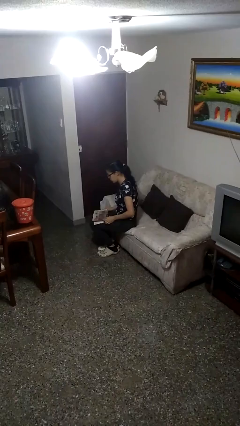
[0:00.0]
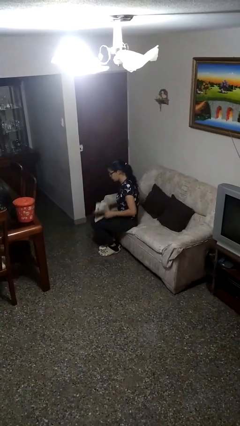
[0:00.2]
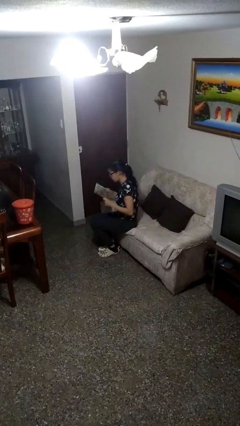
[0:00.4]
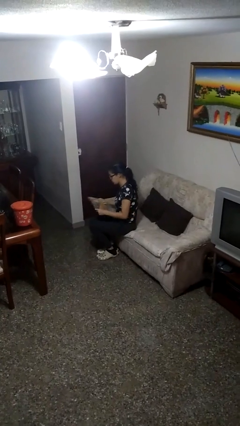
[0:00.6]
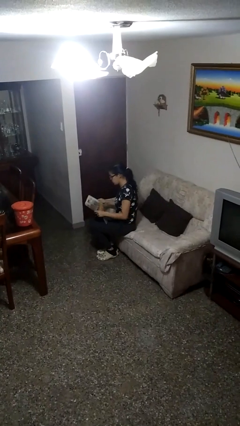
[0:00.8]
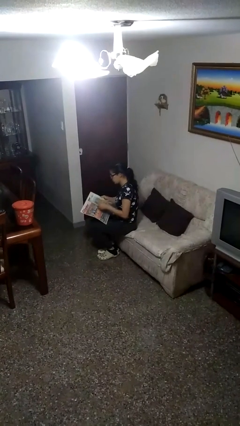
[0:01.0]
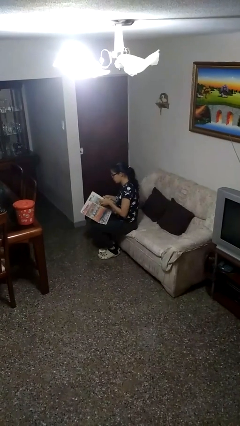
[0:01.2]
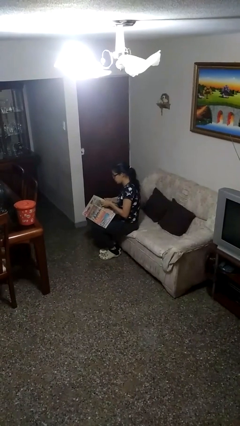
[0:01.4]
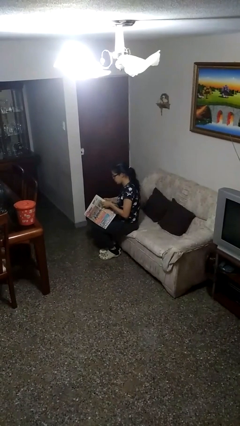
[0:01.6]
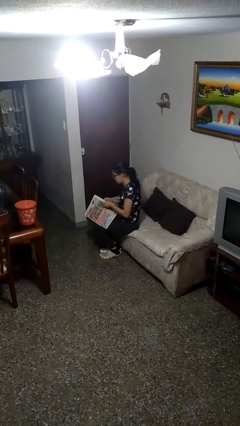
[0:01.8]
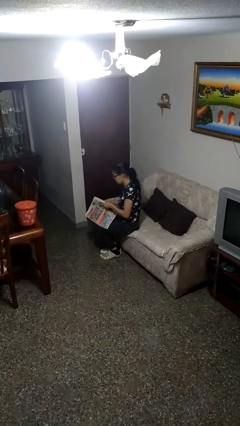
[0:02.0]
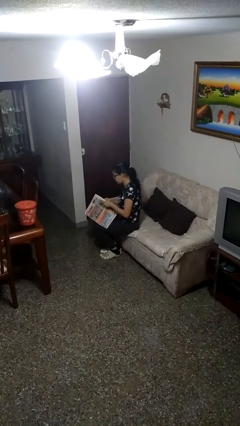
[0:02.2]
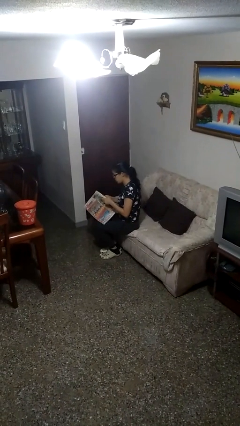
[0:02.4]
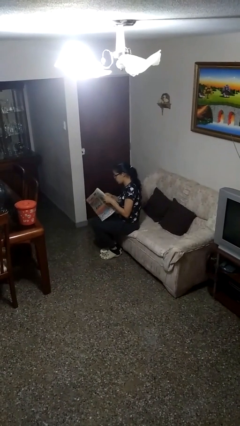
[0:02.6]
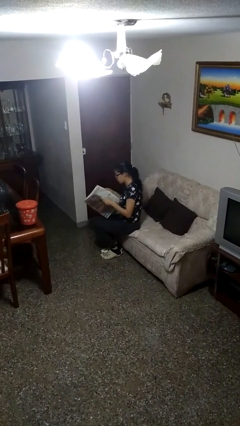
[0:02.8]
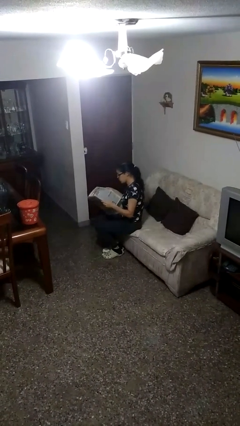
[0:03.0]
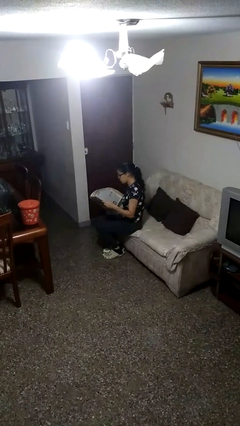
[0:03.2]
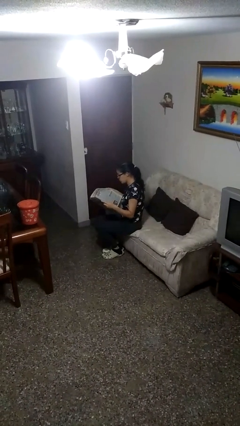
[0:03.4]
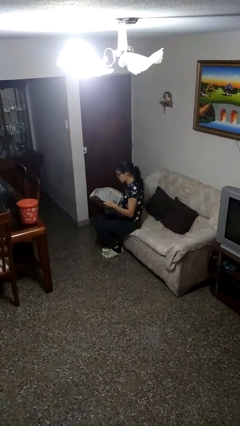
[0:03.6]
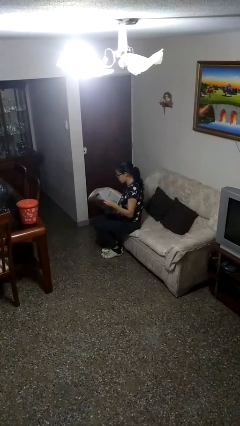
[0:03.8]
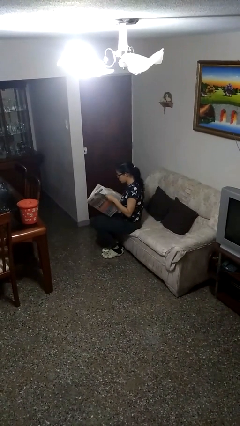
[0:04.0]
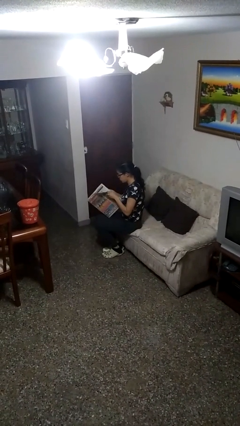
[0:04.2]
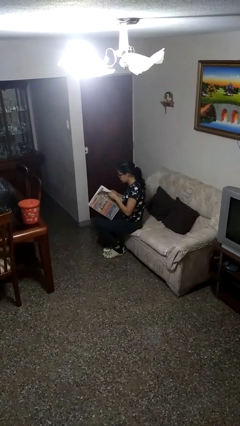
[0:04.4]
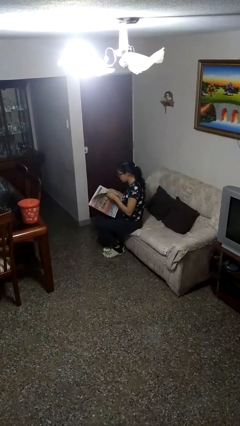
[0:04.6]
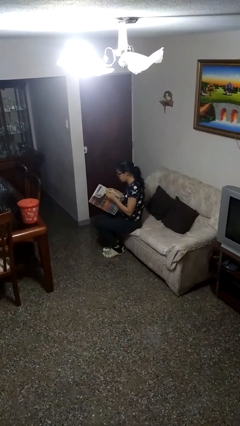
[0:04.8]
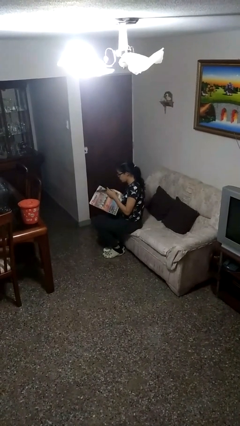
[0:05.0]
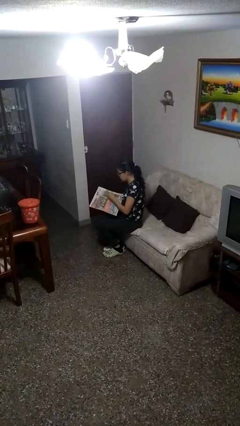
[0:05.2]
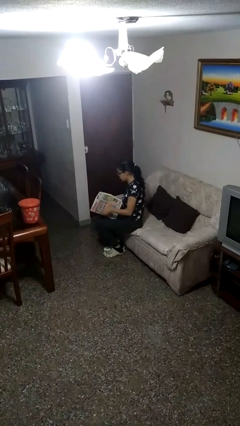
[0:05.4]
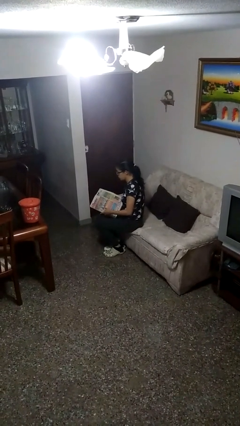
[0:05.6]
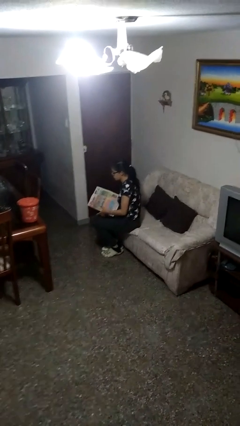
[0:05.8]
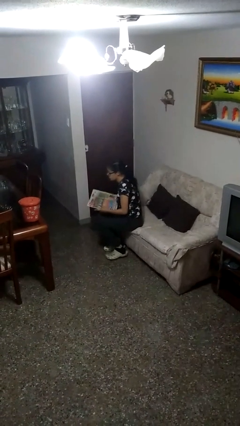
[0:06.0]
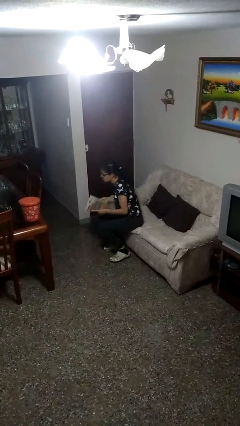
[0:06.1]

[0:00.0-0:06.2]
person reads newspaper

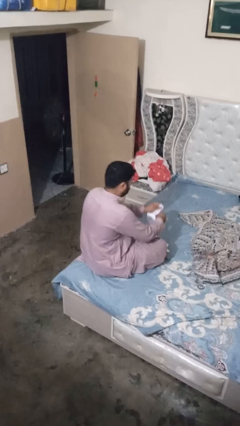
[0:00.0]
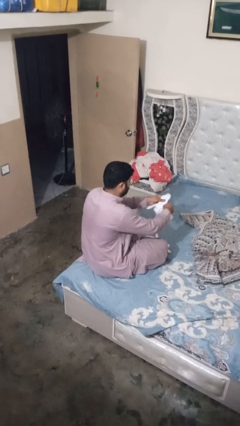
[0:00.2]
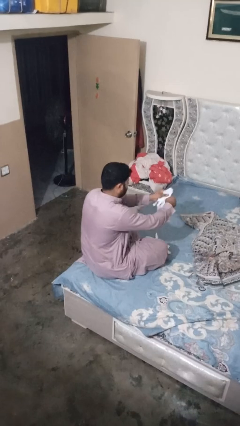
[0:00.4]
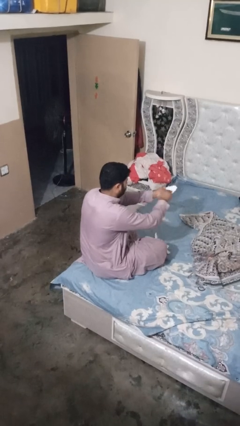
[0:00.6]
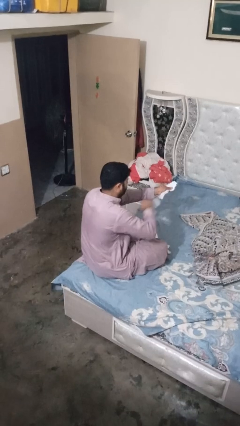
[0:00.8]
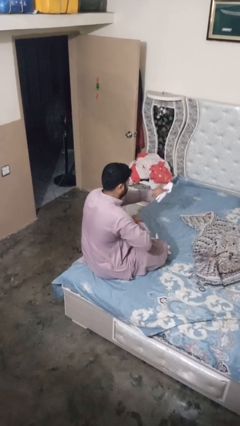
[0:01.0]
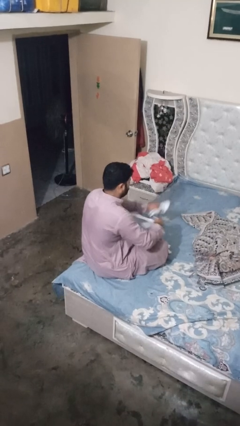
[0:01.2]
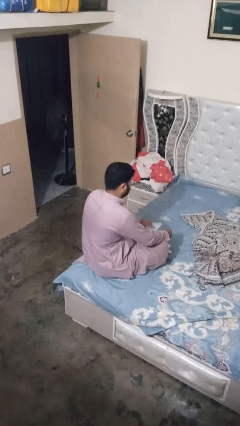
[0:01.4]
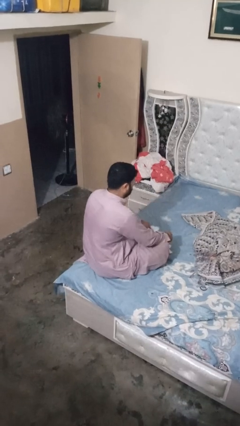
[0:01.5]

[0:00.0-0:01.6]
person tears paper

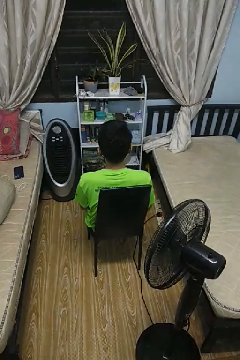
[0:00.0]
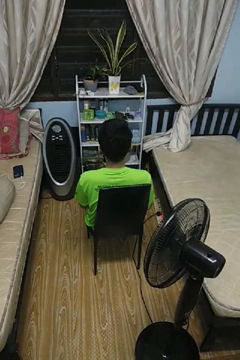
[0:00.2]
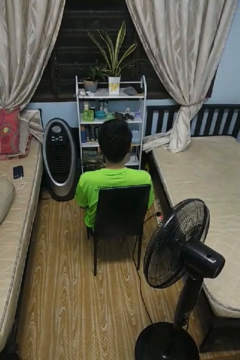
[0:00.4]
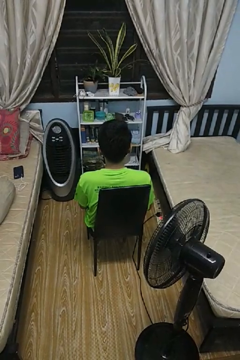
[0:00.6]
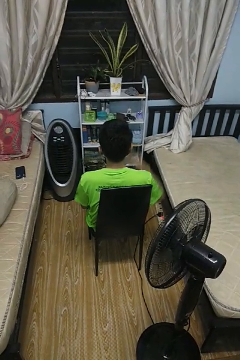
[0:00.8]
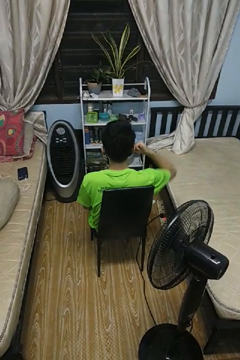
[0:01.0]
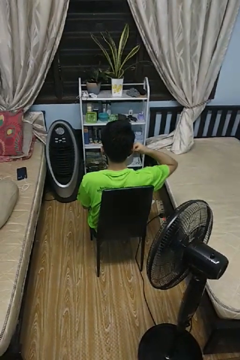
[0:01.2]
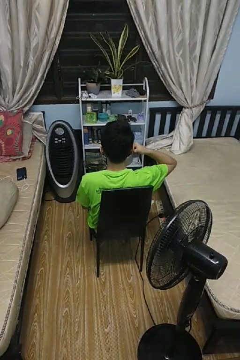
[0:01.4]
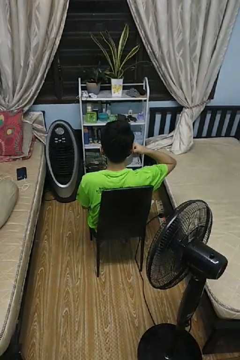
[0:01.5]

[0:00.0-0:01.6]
person gestures call me

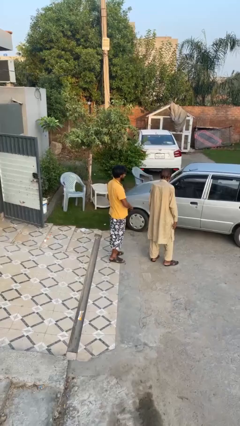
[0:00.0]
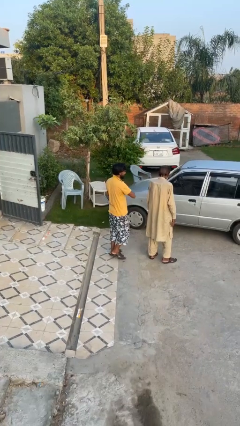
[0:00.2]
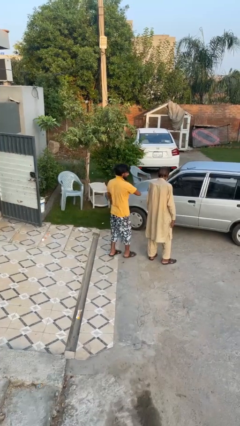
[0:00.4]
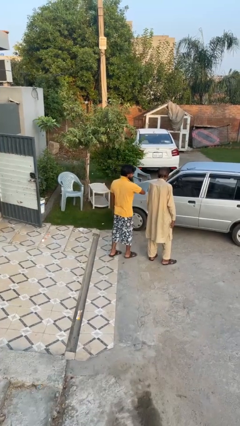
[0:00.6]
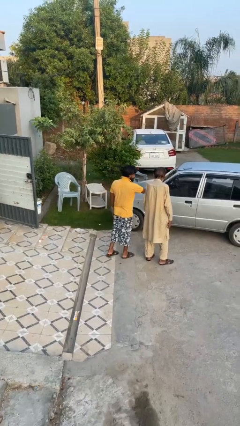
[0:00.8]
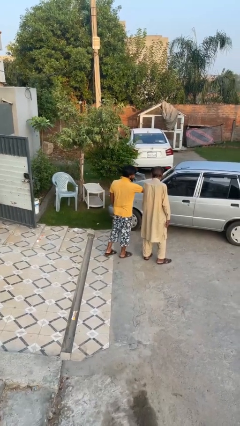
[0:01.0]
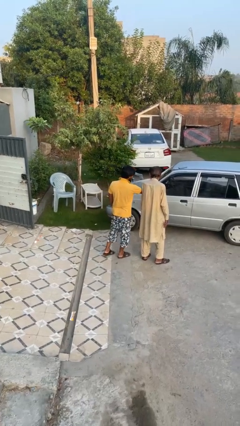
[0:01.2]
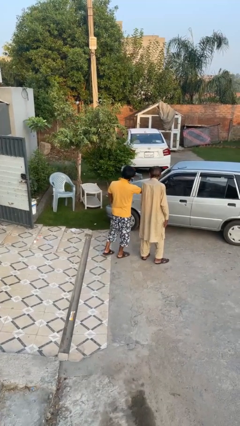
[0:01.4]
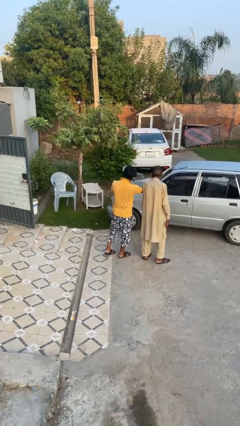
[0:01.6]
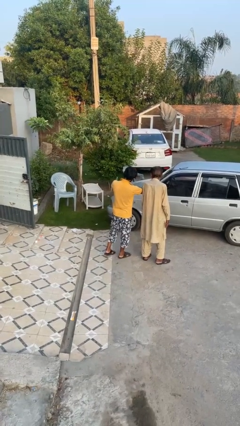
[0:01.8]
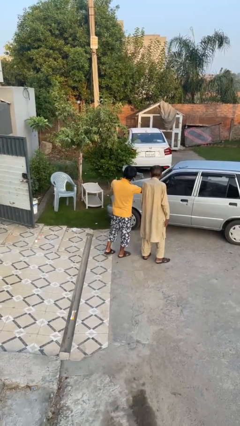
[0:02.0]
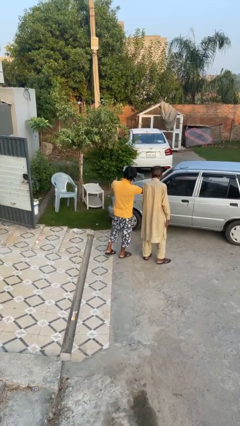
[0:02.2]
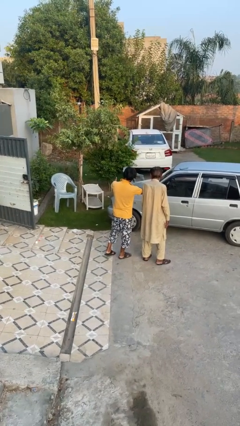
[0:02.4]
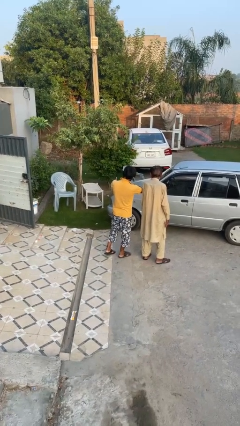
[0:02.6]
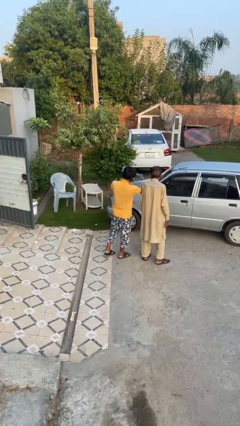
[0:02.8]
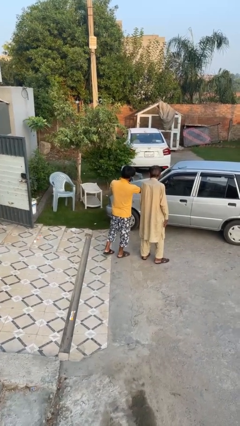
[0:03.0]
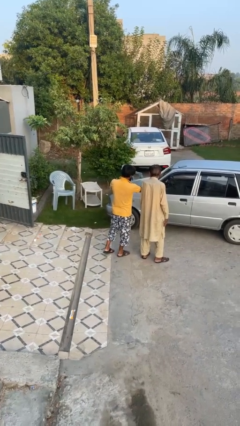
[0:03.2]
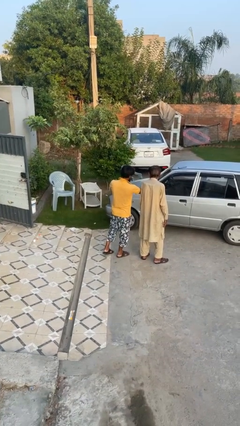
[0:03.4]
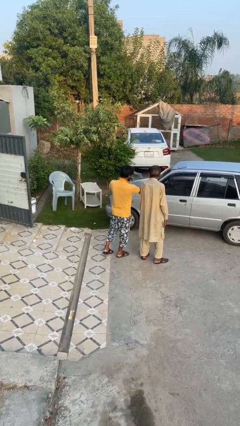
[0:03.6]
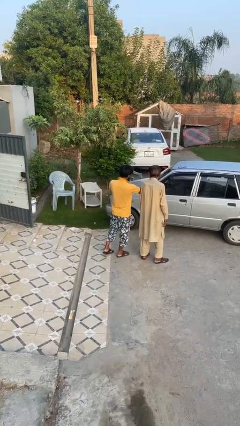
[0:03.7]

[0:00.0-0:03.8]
person nudges person with elbow

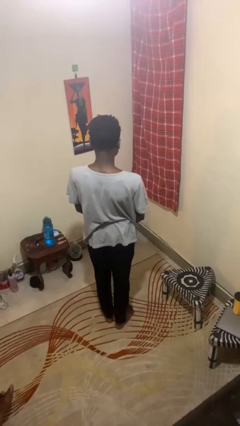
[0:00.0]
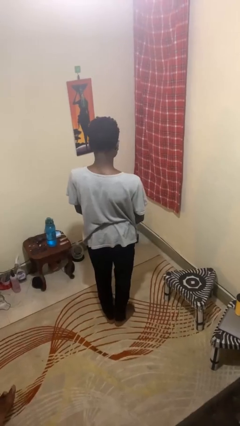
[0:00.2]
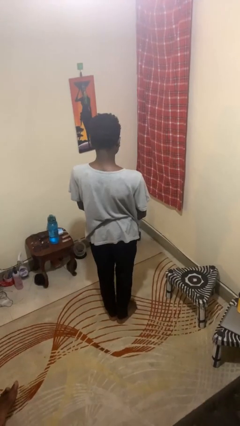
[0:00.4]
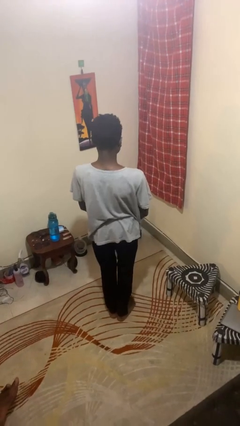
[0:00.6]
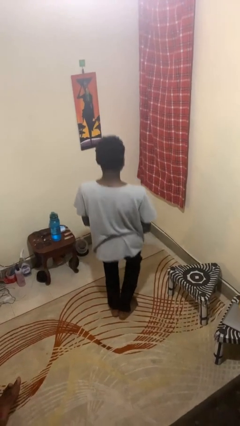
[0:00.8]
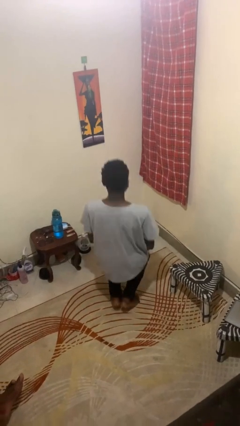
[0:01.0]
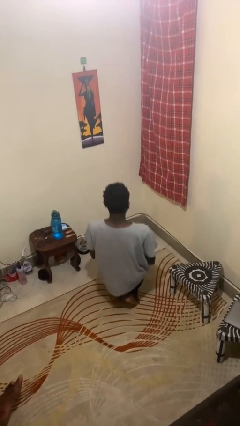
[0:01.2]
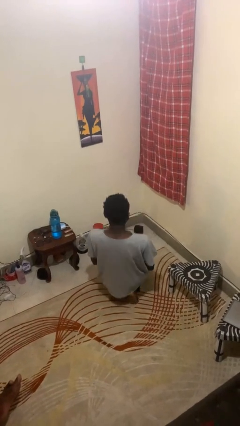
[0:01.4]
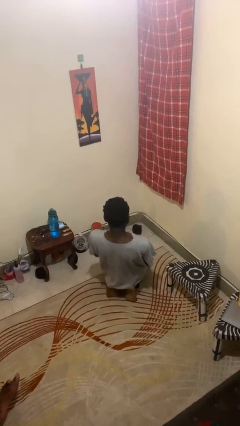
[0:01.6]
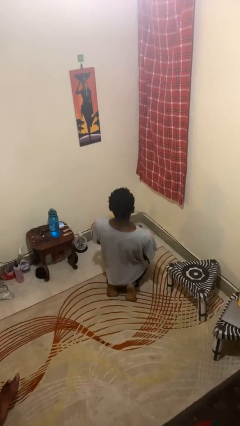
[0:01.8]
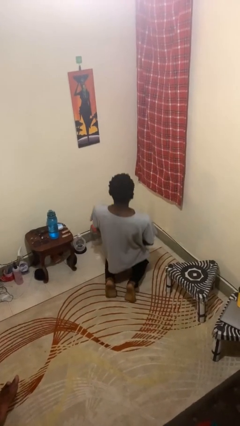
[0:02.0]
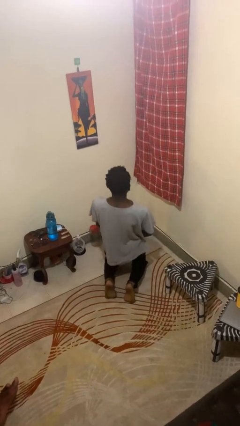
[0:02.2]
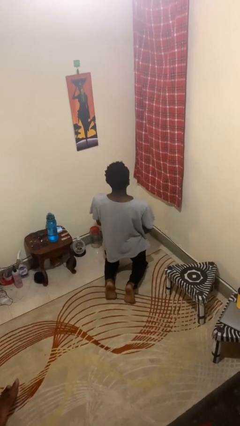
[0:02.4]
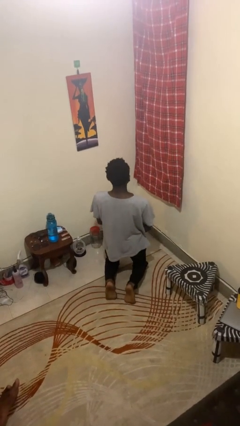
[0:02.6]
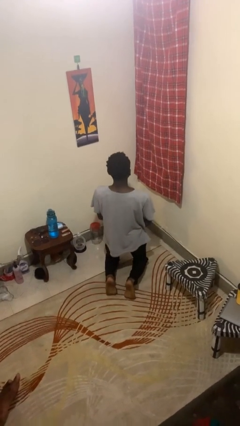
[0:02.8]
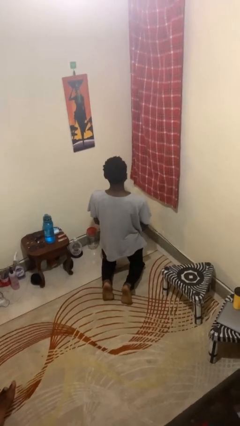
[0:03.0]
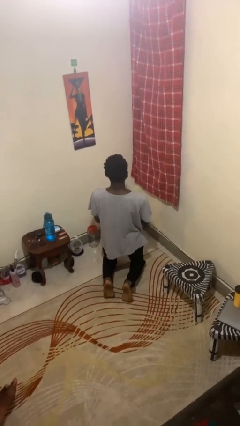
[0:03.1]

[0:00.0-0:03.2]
person kneels

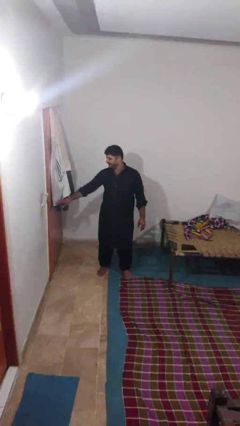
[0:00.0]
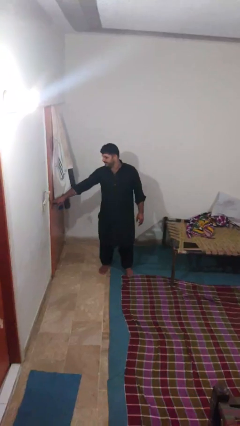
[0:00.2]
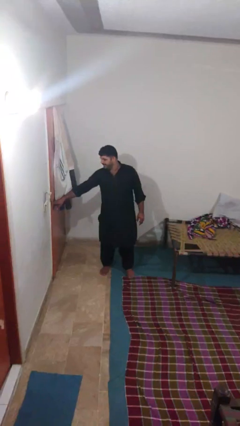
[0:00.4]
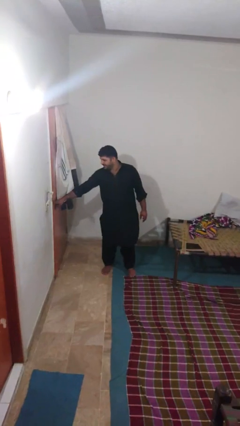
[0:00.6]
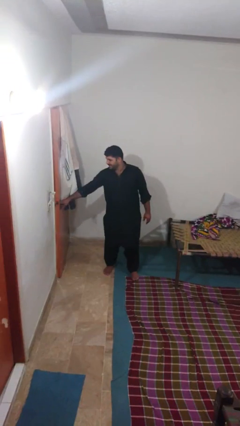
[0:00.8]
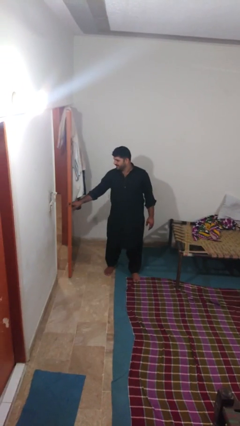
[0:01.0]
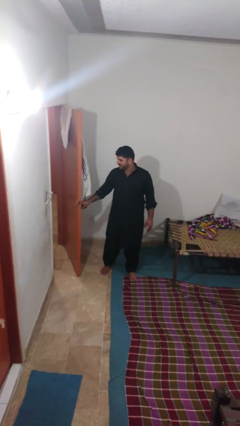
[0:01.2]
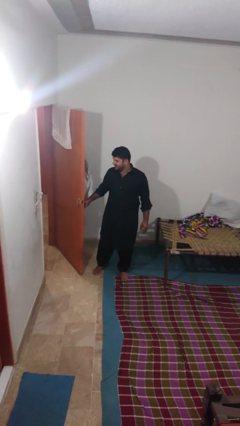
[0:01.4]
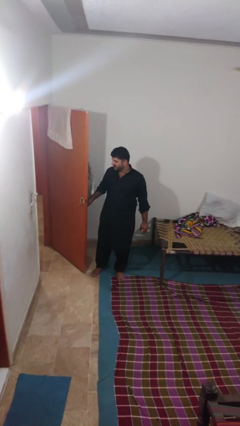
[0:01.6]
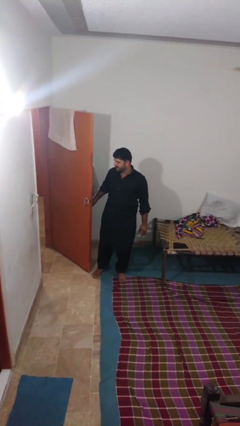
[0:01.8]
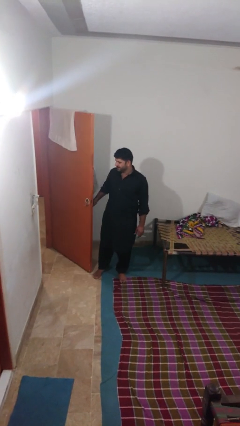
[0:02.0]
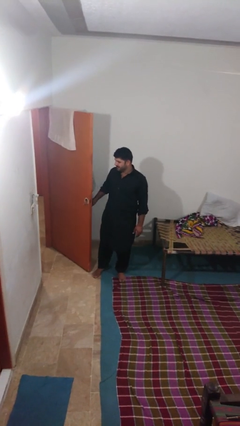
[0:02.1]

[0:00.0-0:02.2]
person opens gate
